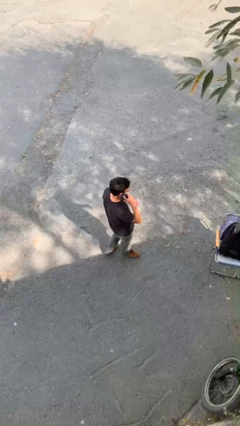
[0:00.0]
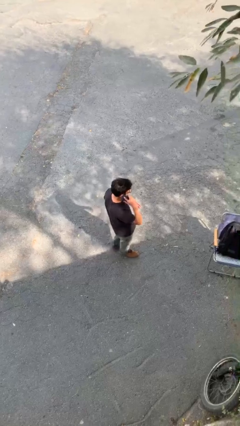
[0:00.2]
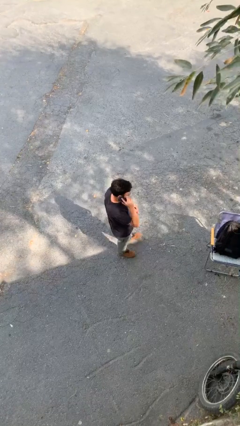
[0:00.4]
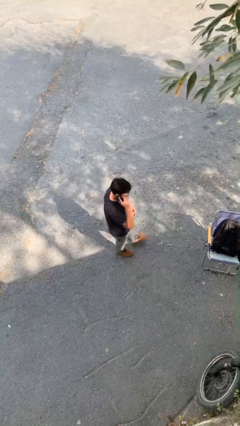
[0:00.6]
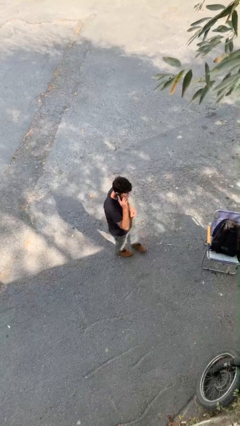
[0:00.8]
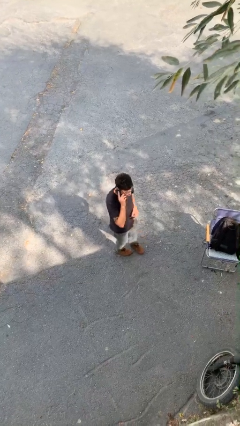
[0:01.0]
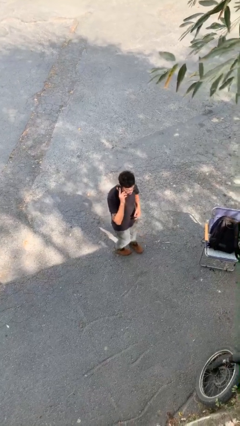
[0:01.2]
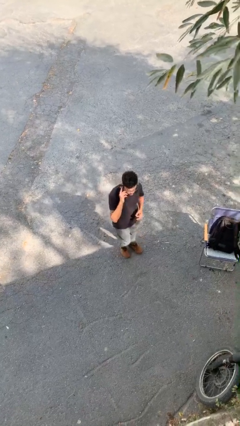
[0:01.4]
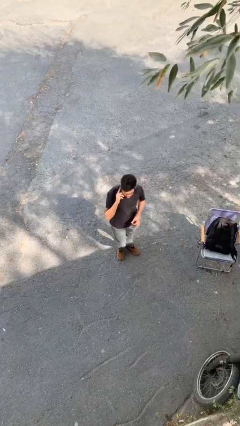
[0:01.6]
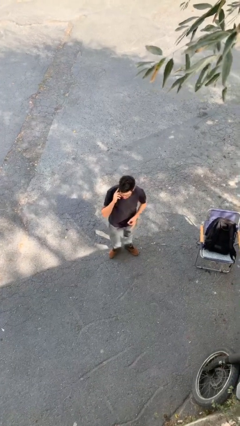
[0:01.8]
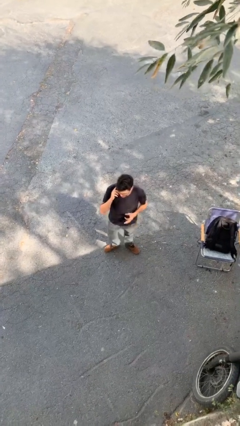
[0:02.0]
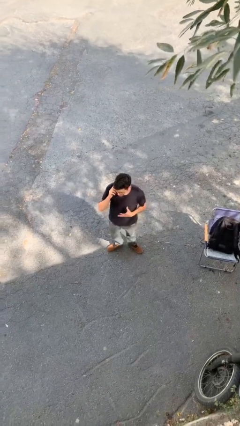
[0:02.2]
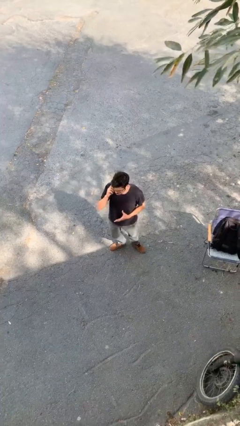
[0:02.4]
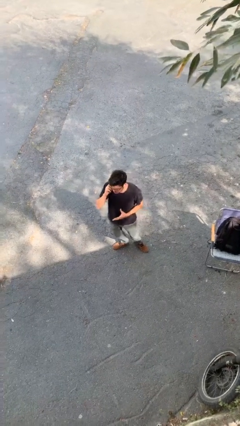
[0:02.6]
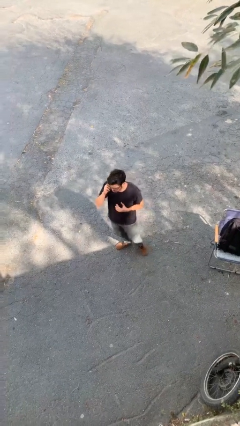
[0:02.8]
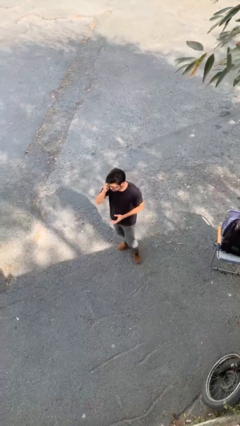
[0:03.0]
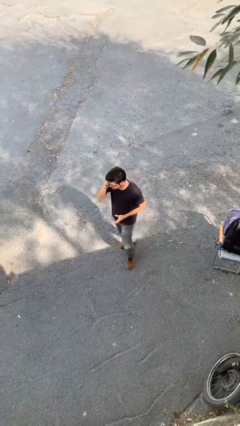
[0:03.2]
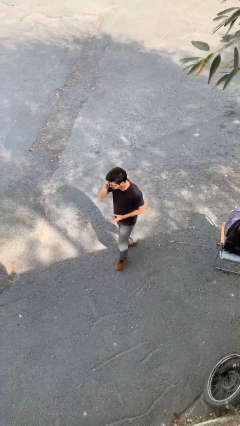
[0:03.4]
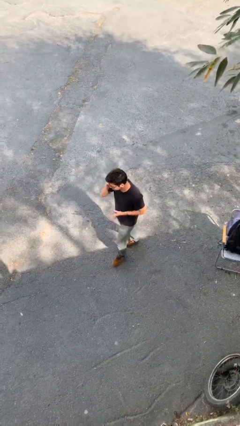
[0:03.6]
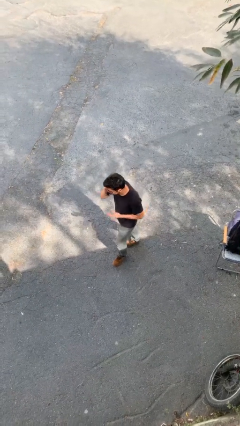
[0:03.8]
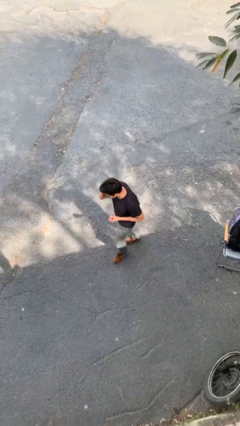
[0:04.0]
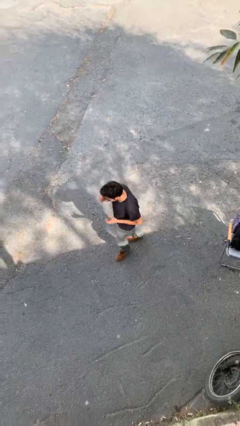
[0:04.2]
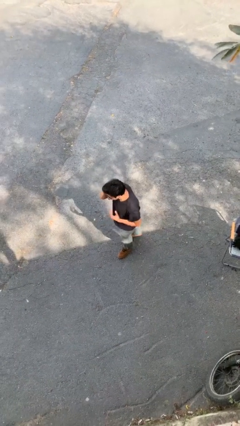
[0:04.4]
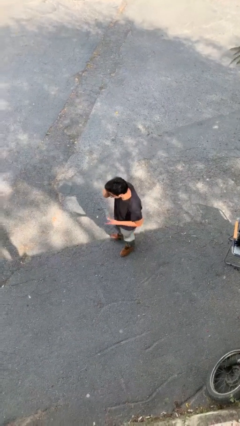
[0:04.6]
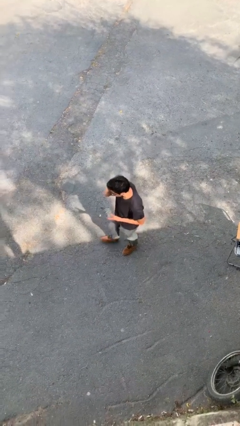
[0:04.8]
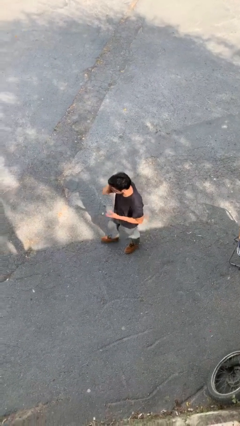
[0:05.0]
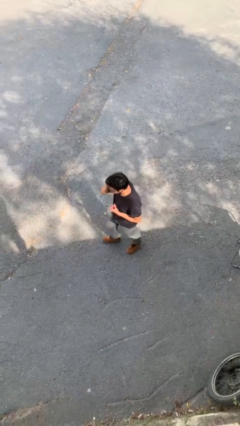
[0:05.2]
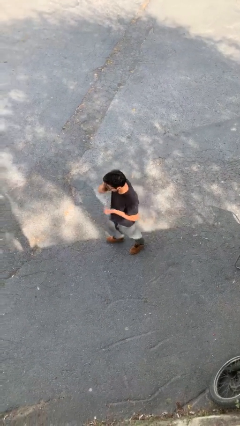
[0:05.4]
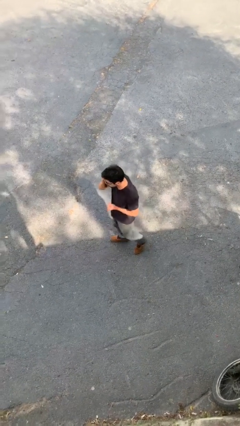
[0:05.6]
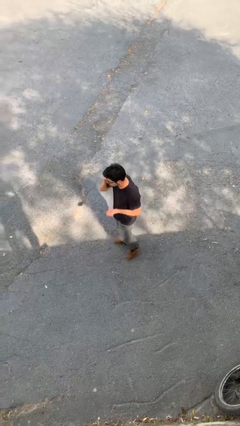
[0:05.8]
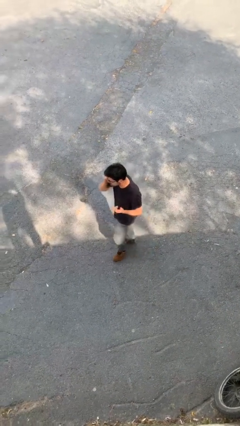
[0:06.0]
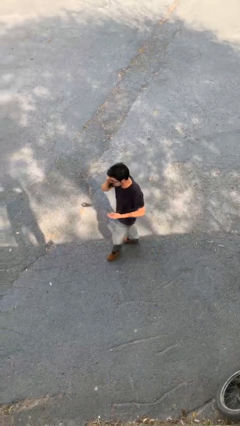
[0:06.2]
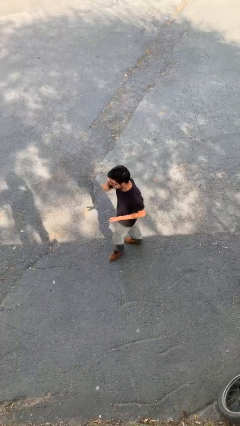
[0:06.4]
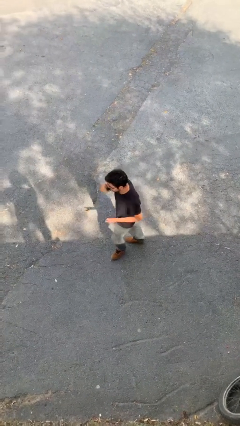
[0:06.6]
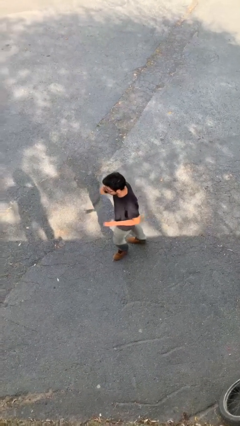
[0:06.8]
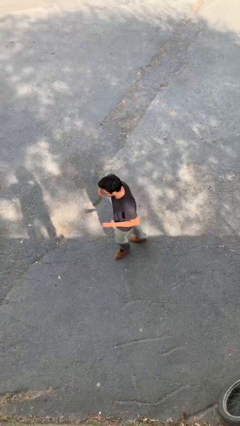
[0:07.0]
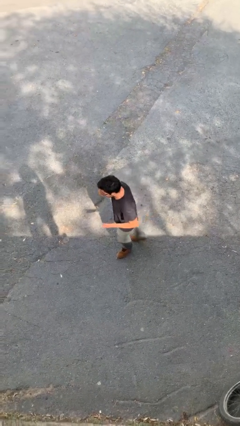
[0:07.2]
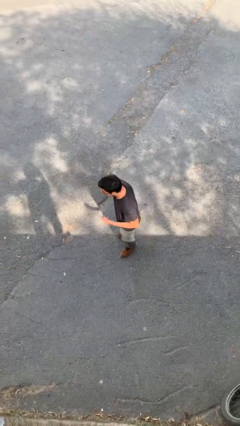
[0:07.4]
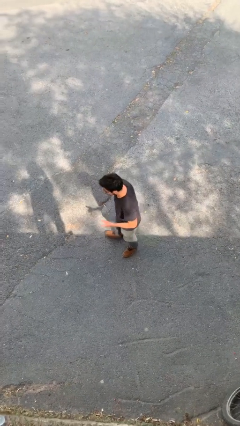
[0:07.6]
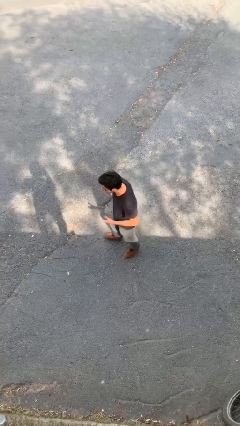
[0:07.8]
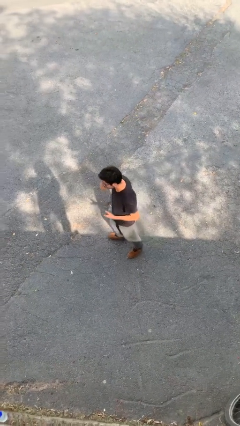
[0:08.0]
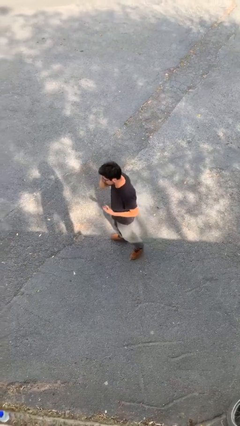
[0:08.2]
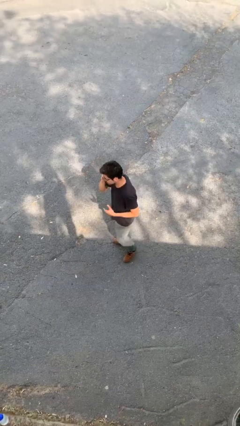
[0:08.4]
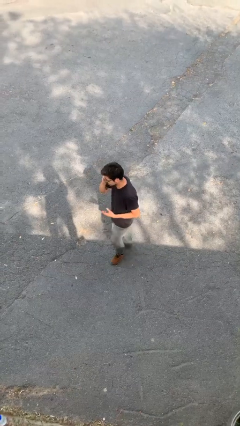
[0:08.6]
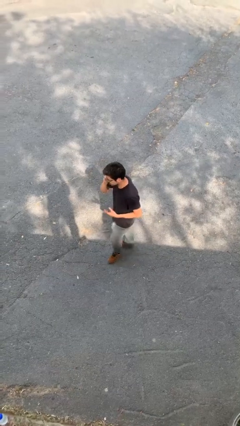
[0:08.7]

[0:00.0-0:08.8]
person talks on phone

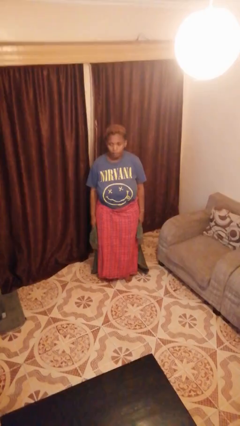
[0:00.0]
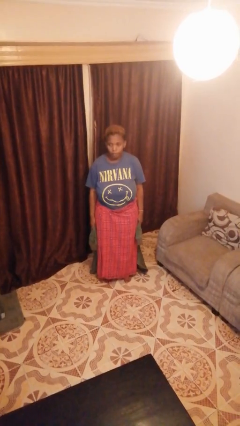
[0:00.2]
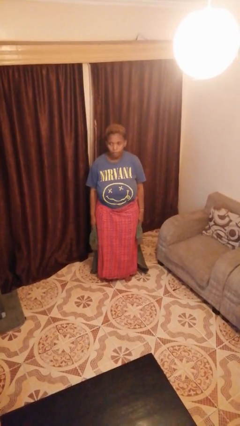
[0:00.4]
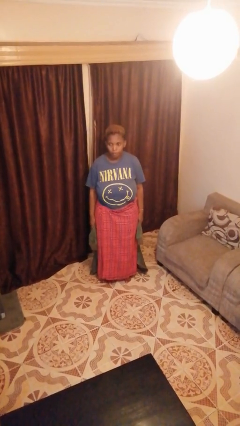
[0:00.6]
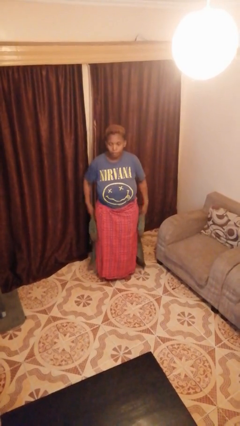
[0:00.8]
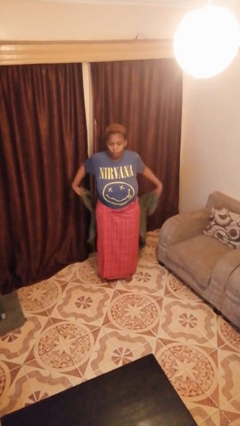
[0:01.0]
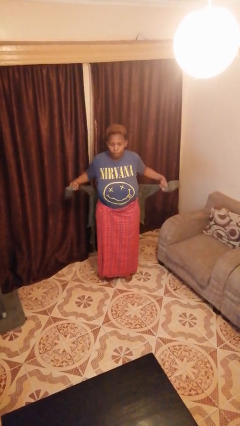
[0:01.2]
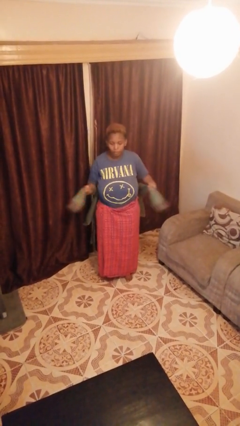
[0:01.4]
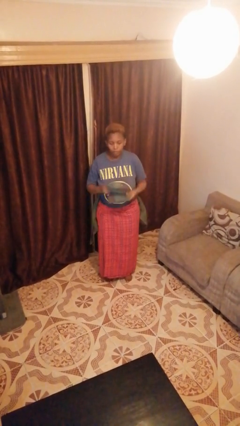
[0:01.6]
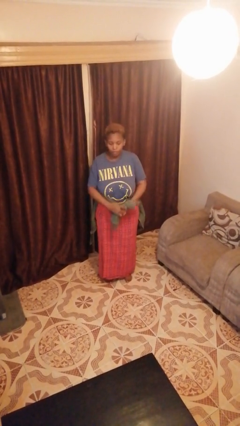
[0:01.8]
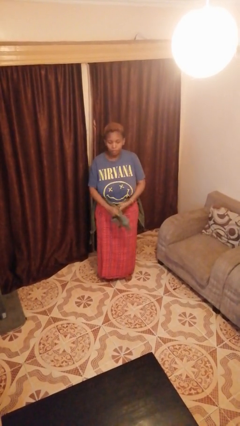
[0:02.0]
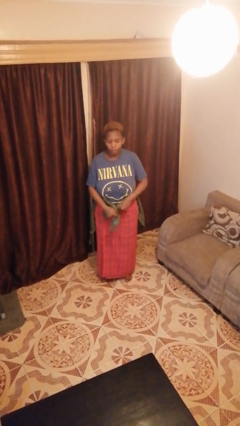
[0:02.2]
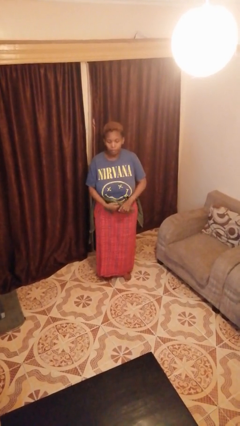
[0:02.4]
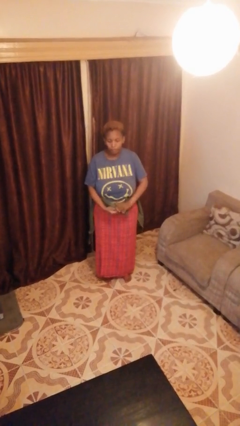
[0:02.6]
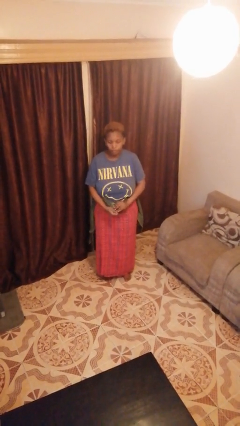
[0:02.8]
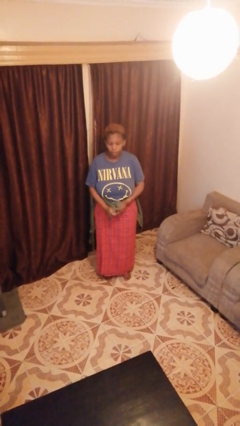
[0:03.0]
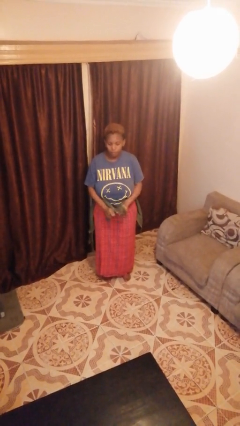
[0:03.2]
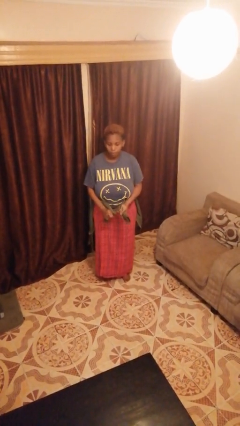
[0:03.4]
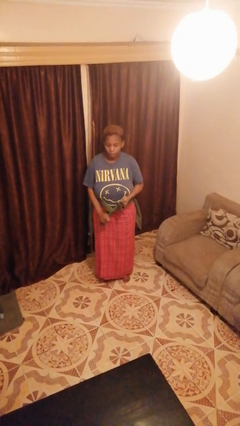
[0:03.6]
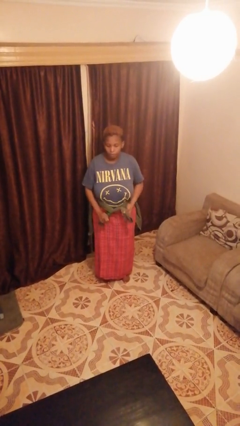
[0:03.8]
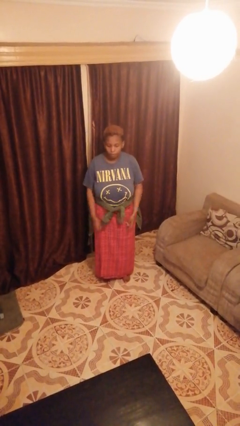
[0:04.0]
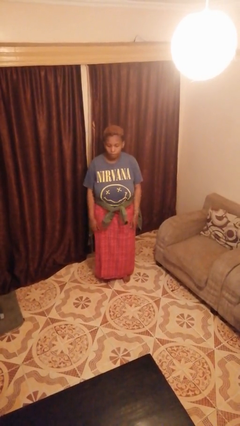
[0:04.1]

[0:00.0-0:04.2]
person ties jacket around waist

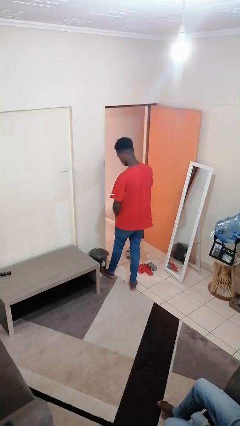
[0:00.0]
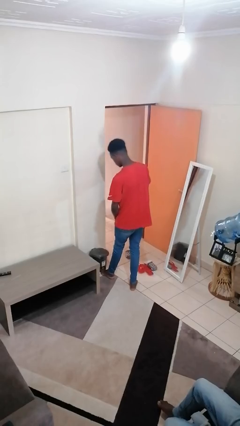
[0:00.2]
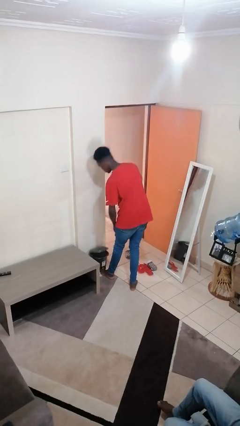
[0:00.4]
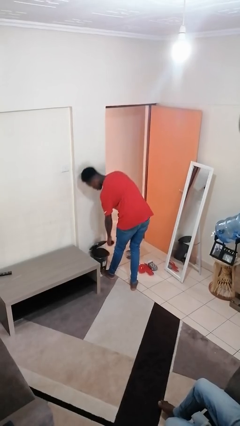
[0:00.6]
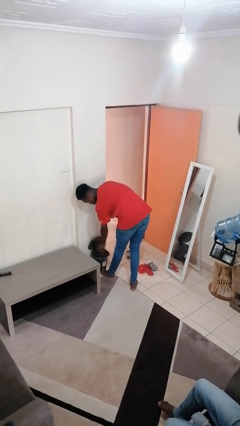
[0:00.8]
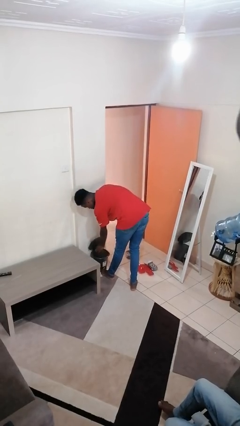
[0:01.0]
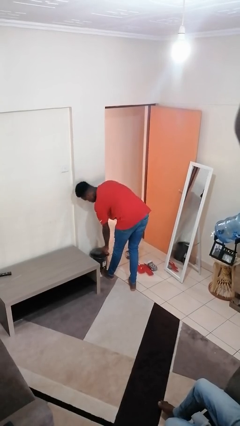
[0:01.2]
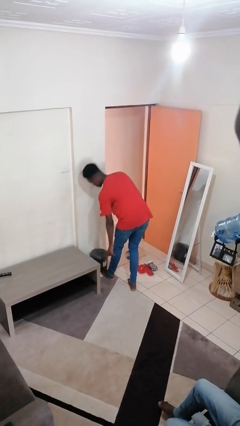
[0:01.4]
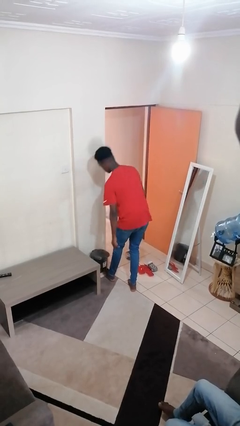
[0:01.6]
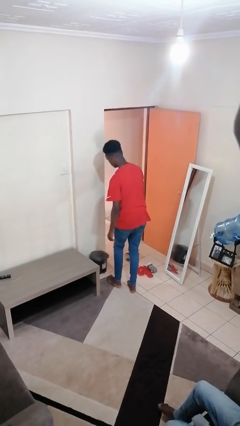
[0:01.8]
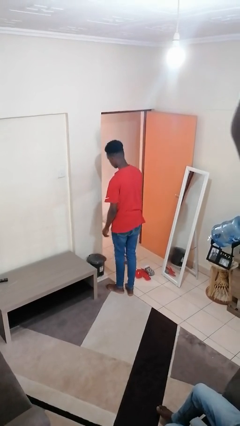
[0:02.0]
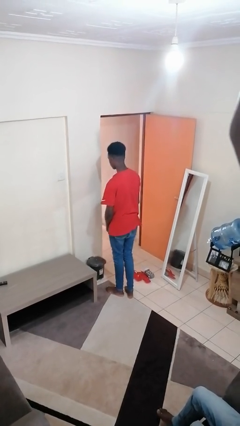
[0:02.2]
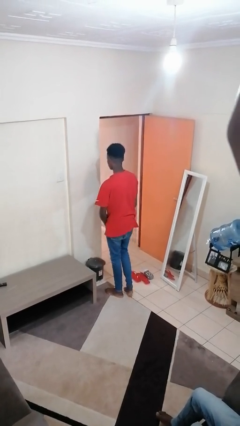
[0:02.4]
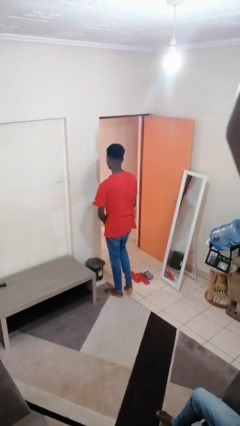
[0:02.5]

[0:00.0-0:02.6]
person discards trash

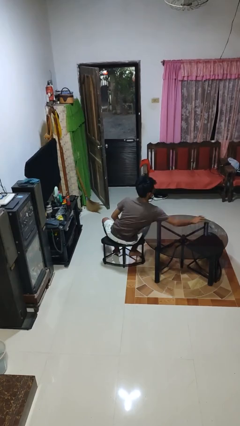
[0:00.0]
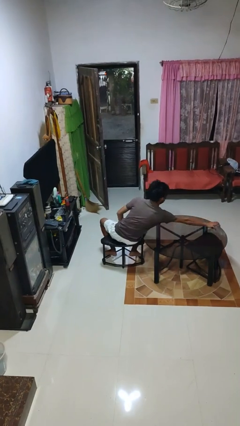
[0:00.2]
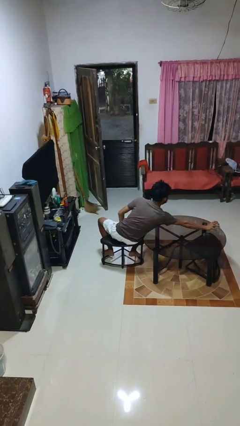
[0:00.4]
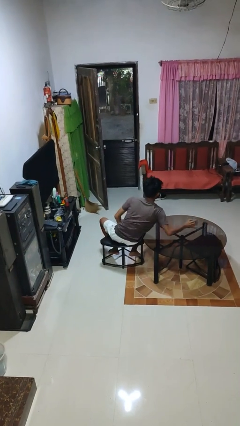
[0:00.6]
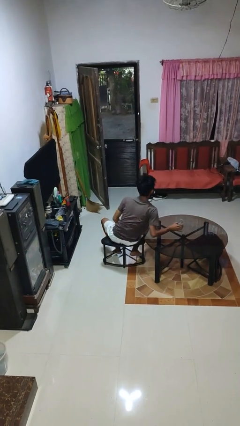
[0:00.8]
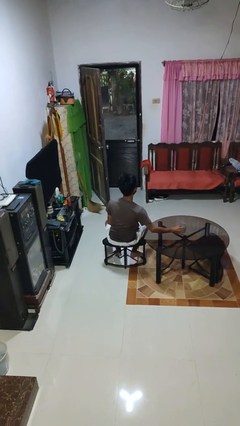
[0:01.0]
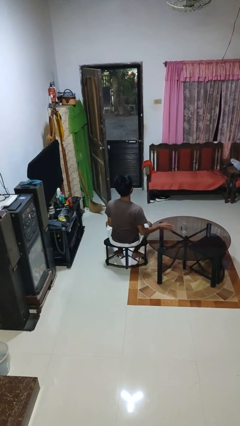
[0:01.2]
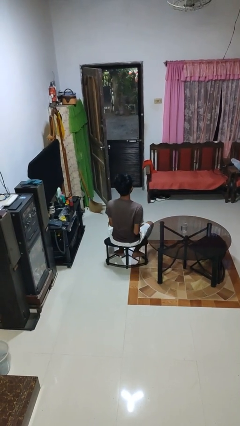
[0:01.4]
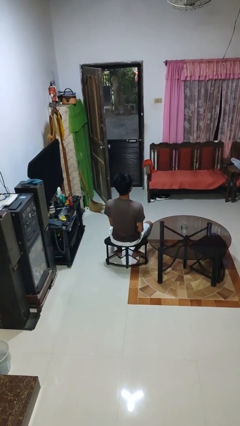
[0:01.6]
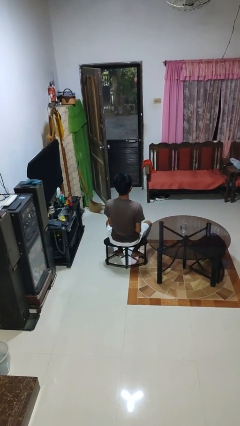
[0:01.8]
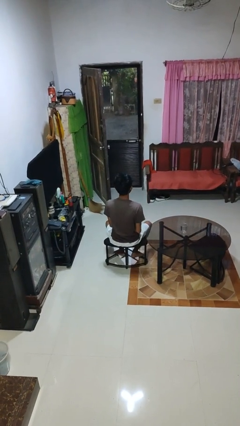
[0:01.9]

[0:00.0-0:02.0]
person sets upright glass
